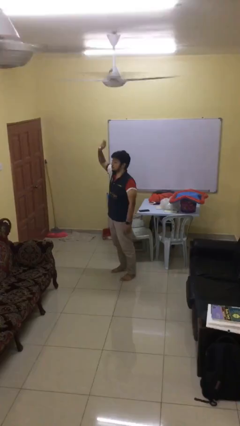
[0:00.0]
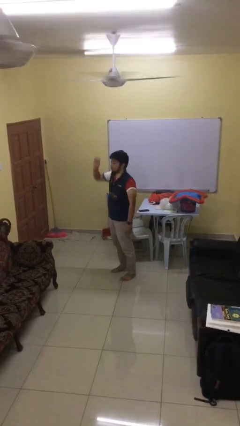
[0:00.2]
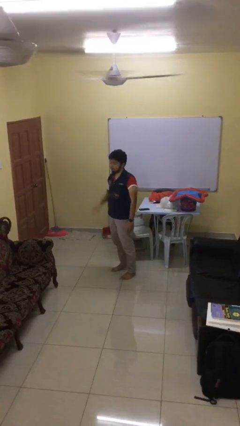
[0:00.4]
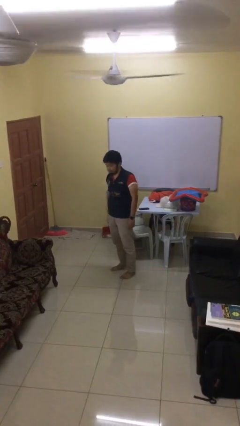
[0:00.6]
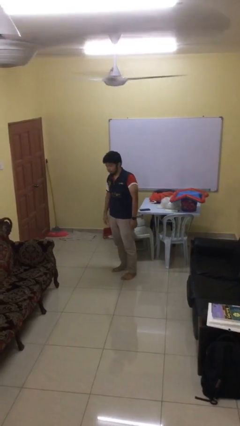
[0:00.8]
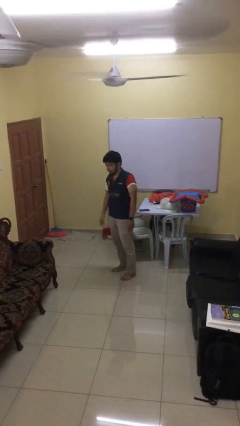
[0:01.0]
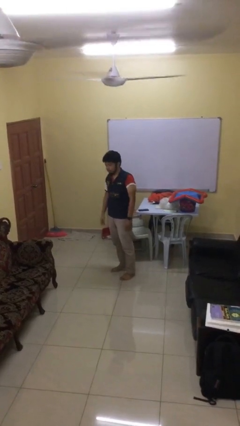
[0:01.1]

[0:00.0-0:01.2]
person gestures lower hand

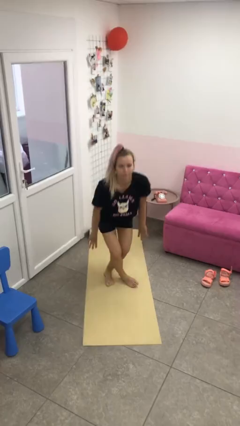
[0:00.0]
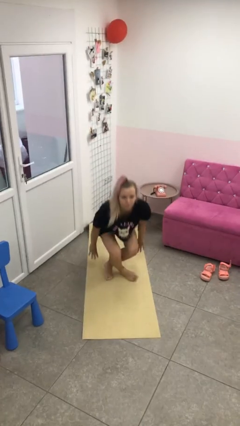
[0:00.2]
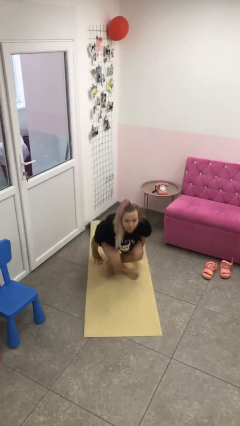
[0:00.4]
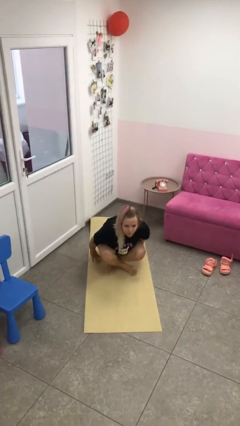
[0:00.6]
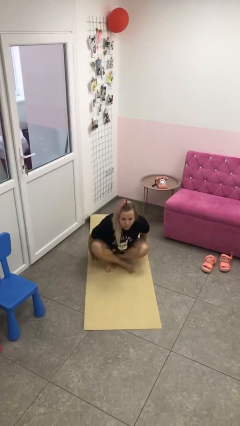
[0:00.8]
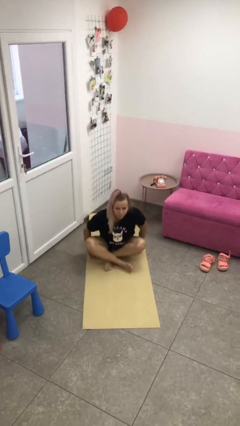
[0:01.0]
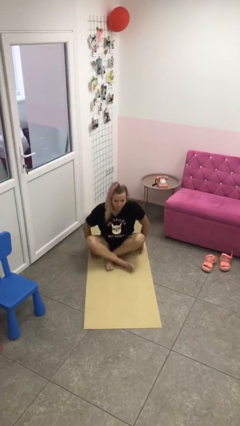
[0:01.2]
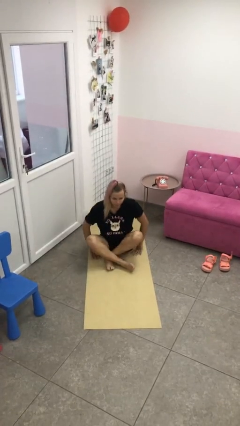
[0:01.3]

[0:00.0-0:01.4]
person sits crisscross

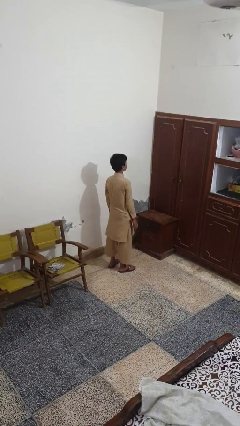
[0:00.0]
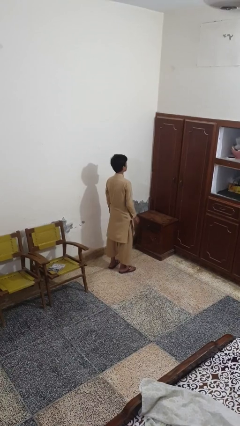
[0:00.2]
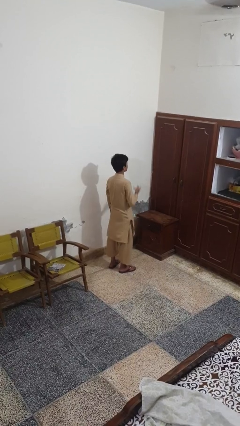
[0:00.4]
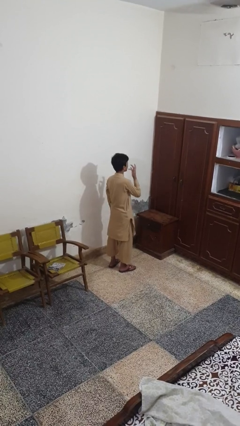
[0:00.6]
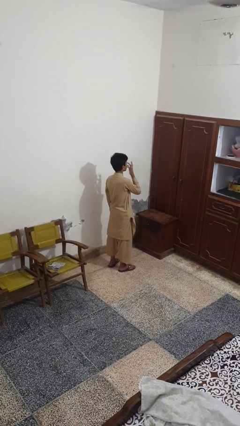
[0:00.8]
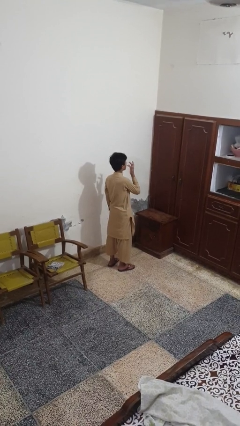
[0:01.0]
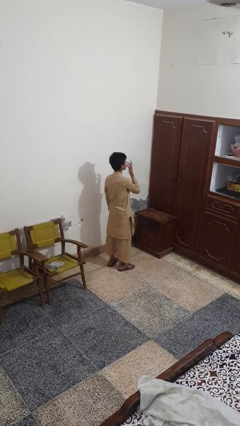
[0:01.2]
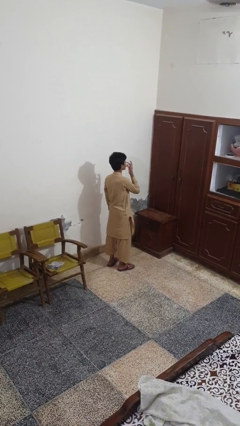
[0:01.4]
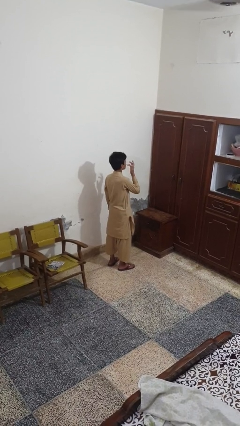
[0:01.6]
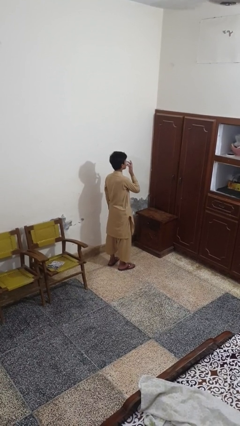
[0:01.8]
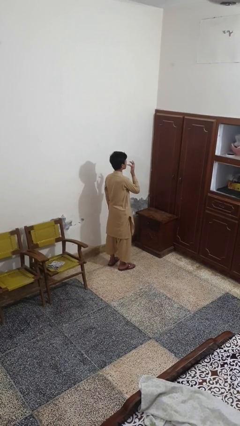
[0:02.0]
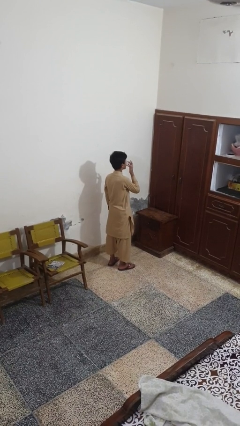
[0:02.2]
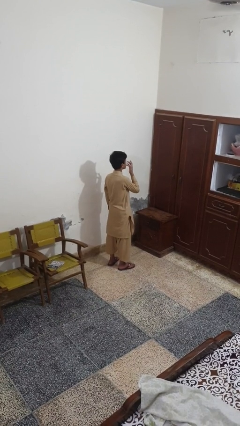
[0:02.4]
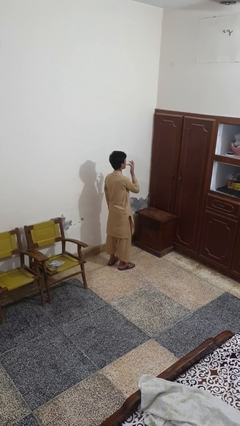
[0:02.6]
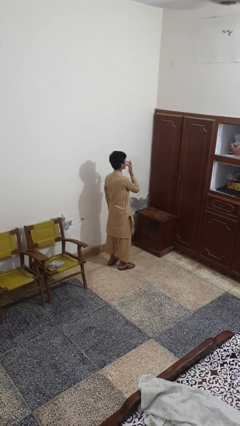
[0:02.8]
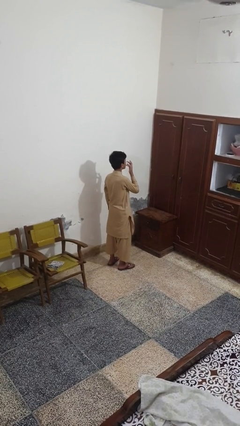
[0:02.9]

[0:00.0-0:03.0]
person licks fingers

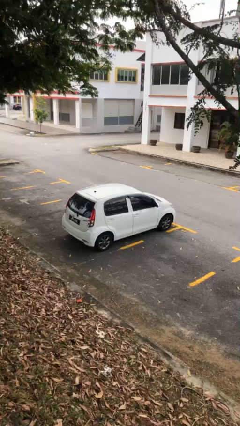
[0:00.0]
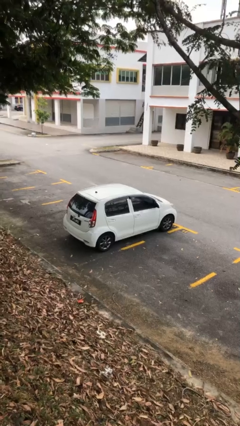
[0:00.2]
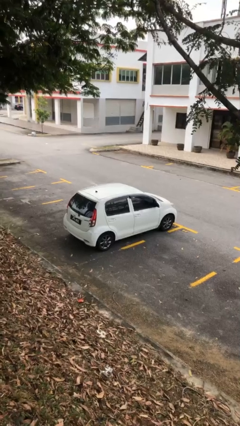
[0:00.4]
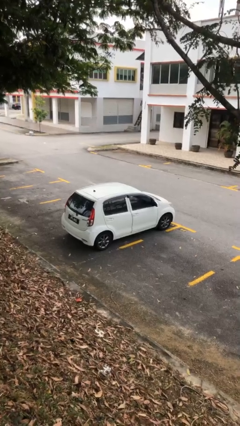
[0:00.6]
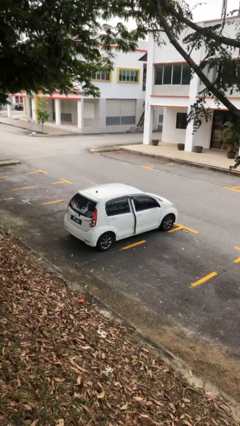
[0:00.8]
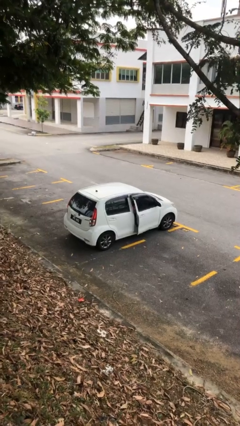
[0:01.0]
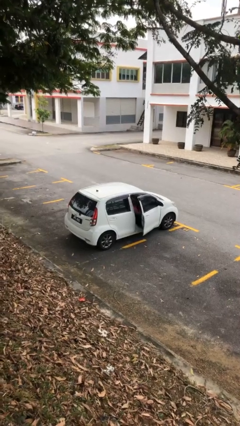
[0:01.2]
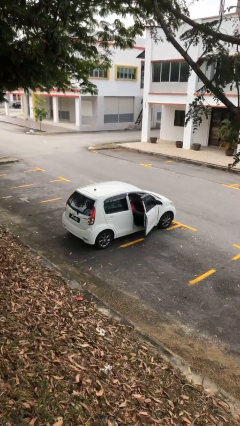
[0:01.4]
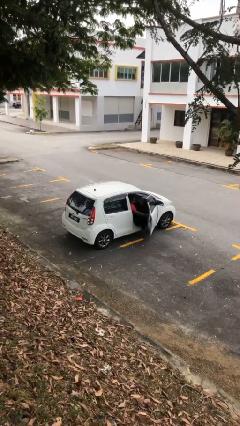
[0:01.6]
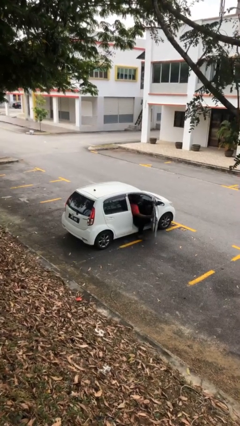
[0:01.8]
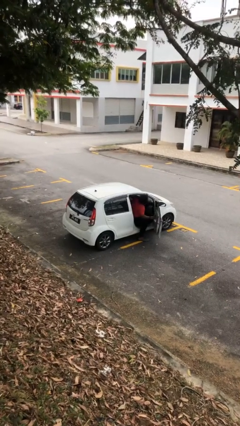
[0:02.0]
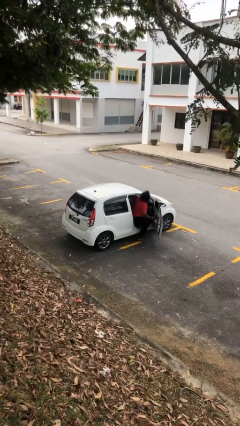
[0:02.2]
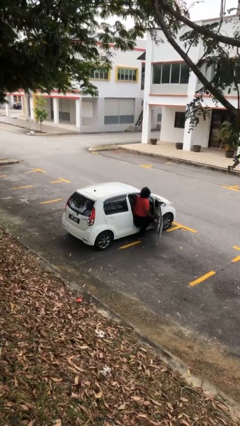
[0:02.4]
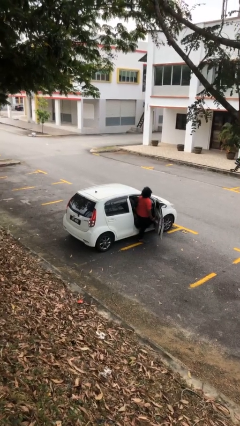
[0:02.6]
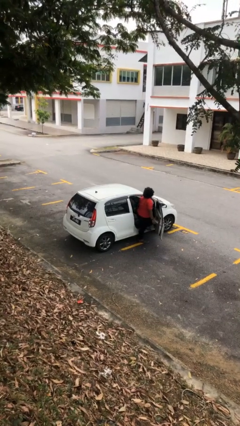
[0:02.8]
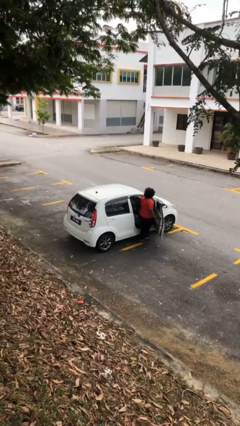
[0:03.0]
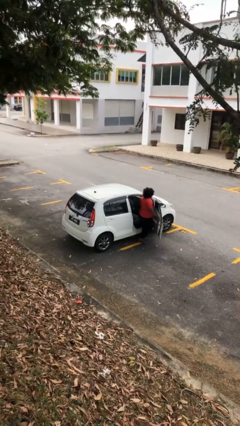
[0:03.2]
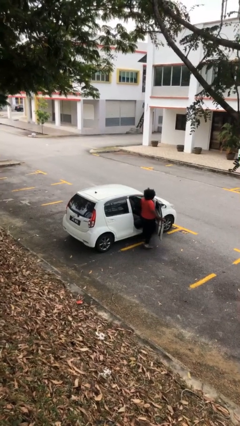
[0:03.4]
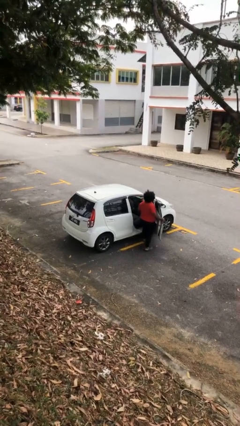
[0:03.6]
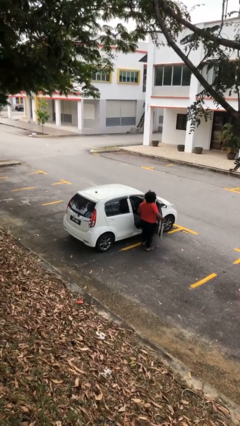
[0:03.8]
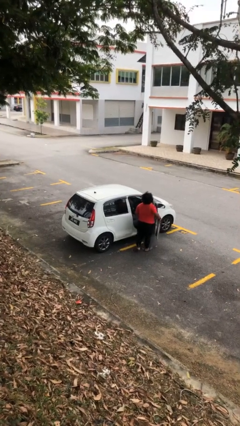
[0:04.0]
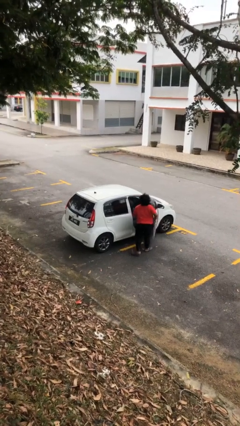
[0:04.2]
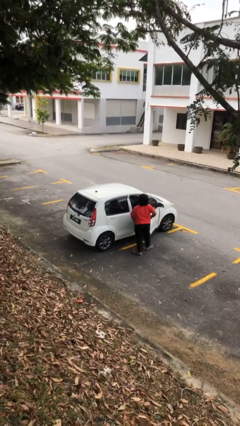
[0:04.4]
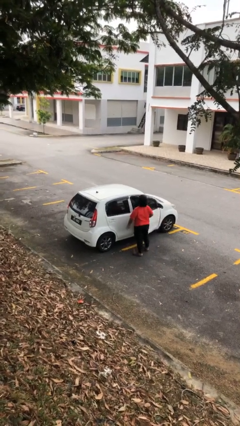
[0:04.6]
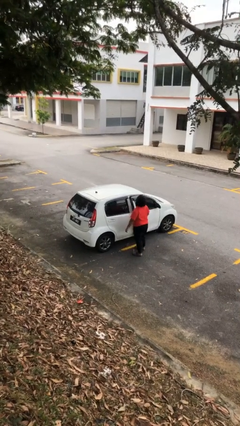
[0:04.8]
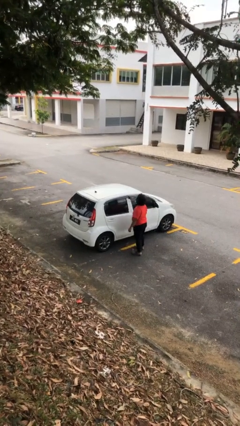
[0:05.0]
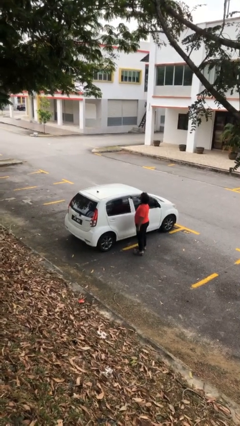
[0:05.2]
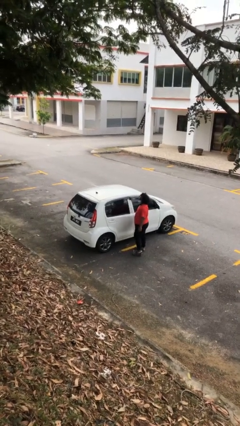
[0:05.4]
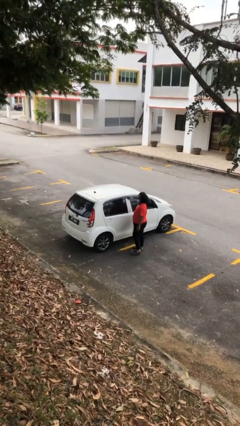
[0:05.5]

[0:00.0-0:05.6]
car drops off person

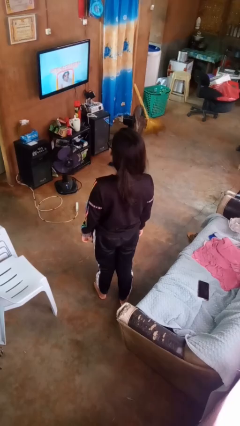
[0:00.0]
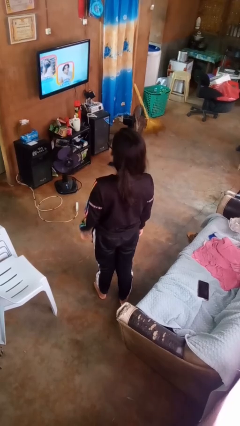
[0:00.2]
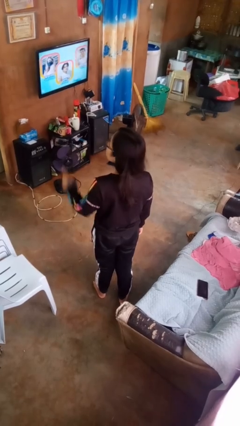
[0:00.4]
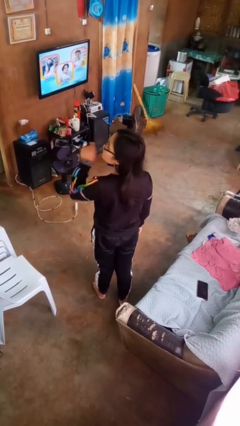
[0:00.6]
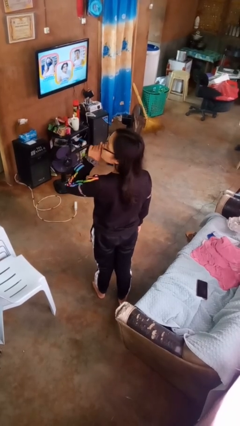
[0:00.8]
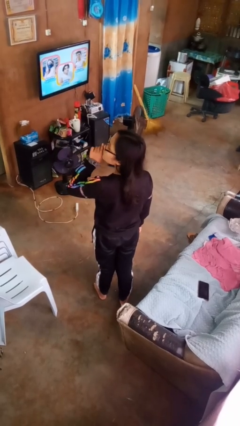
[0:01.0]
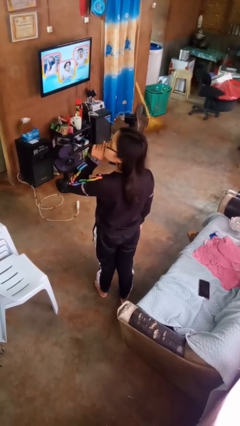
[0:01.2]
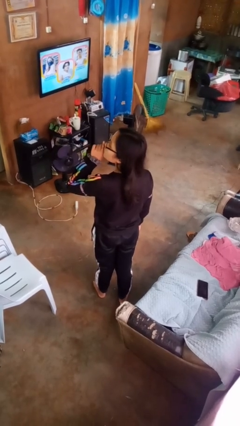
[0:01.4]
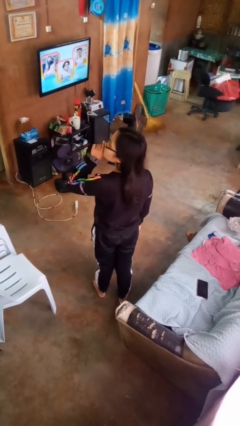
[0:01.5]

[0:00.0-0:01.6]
person gestures be quiet

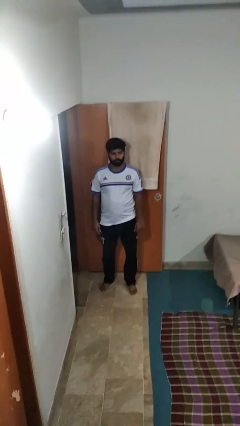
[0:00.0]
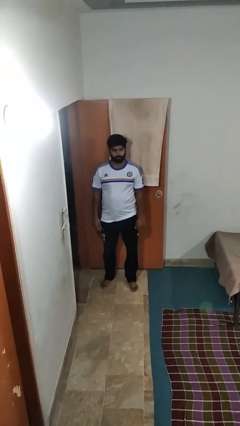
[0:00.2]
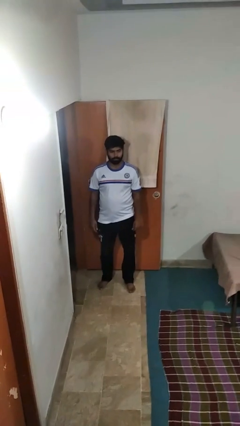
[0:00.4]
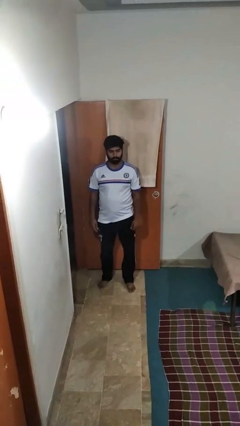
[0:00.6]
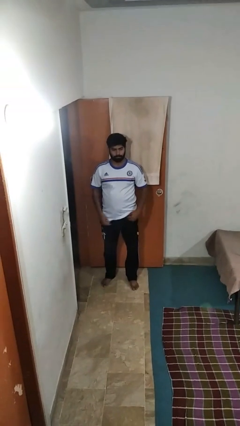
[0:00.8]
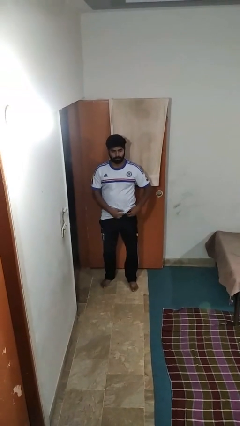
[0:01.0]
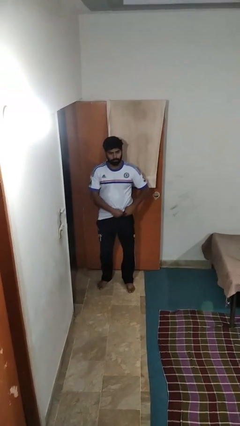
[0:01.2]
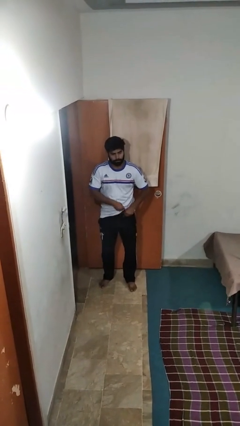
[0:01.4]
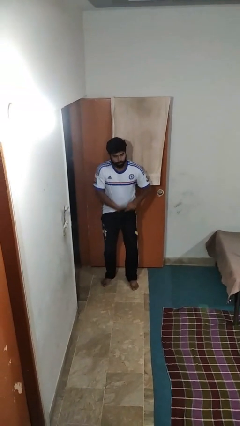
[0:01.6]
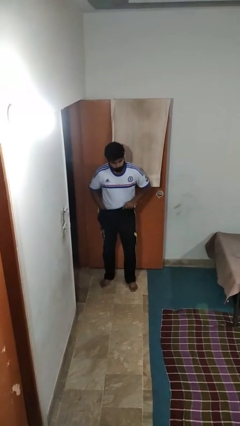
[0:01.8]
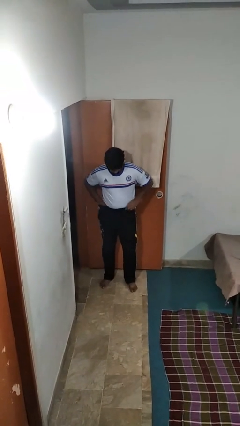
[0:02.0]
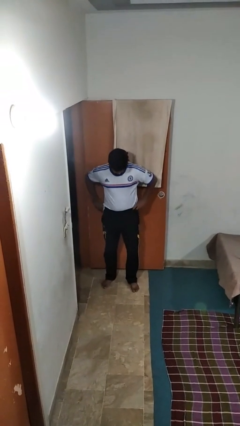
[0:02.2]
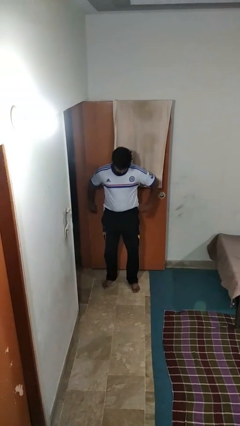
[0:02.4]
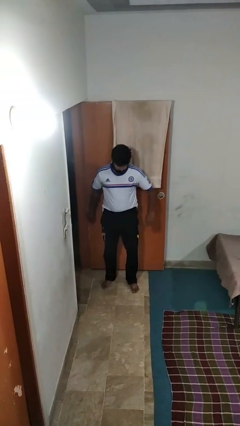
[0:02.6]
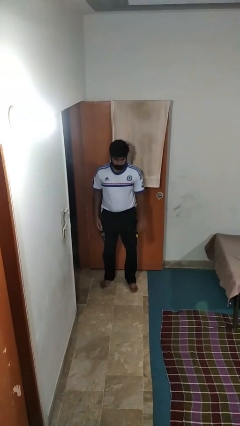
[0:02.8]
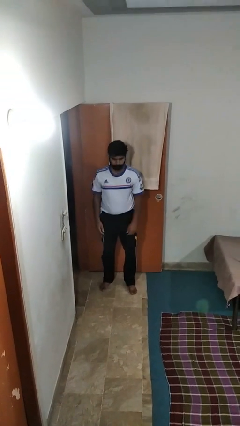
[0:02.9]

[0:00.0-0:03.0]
person tucks in shirt

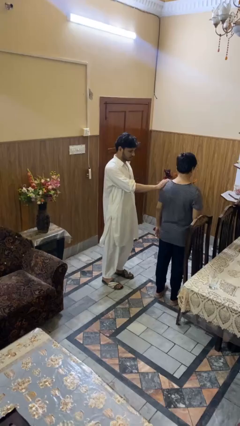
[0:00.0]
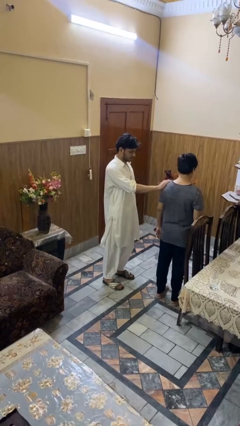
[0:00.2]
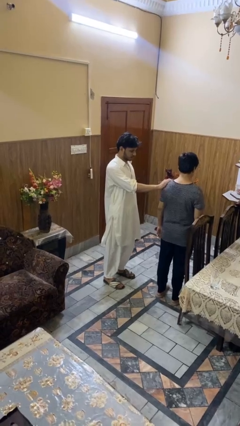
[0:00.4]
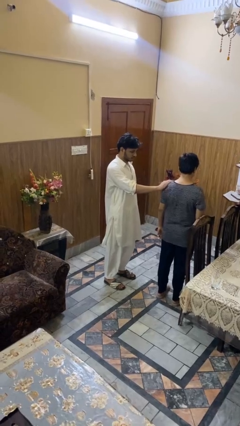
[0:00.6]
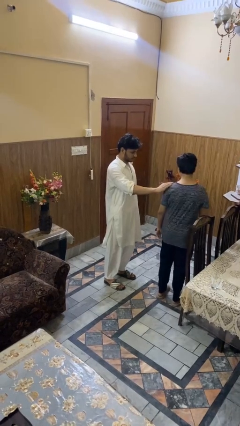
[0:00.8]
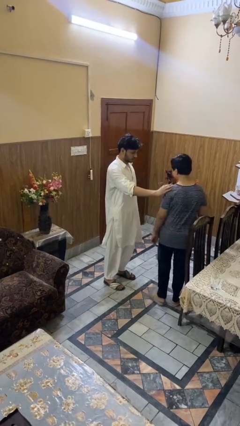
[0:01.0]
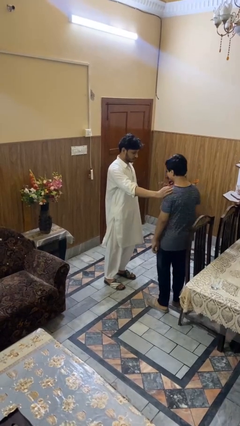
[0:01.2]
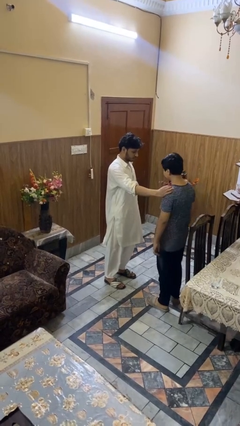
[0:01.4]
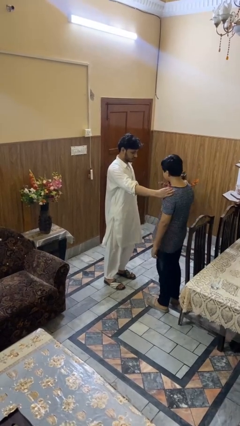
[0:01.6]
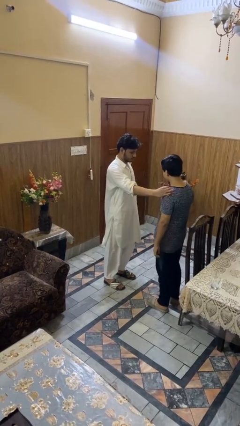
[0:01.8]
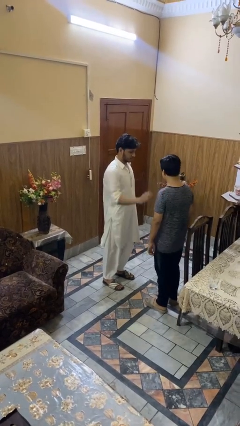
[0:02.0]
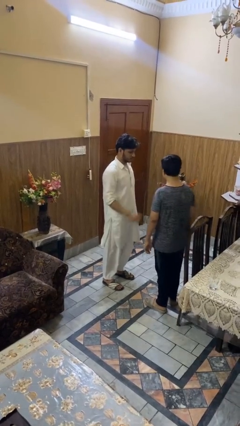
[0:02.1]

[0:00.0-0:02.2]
person spins person around
